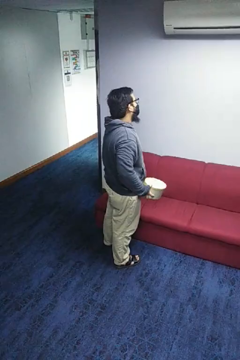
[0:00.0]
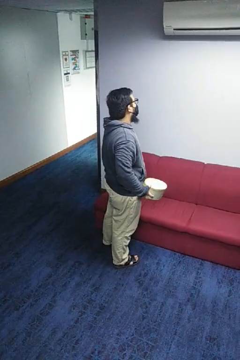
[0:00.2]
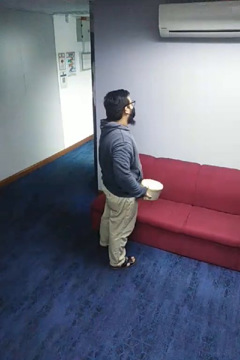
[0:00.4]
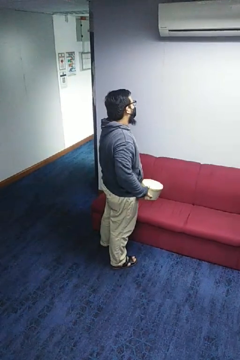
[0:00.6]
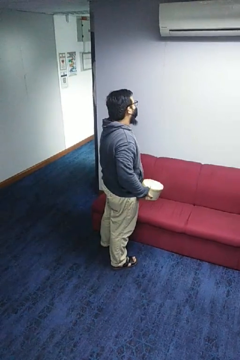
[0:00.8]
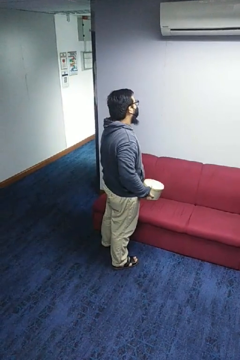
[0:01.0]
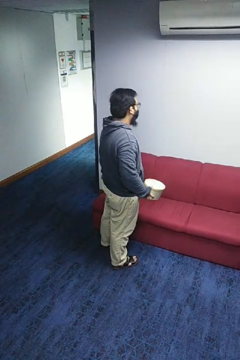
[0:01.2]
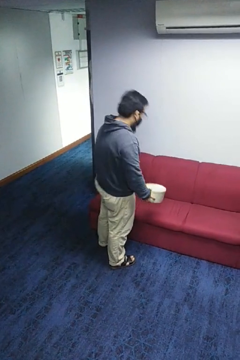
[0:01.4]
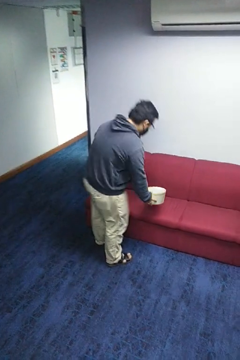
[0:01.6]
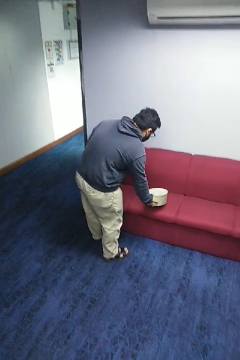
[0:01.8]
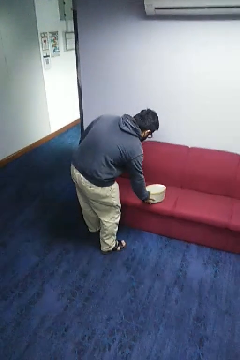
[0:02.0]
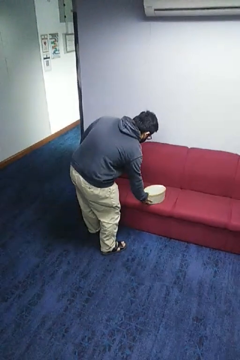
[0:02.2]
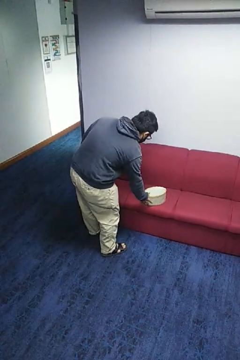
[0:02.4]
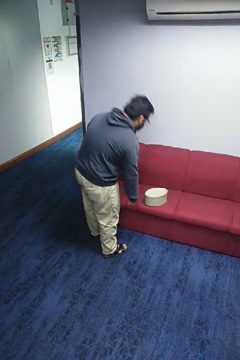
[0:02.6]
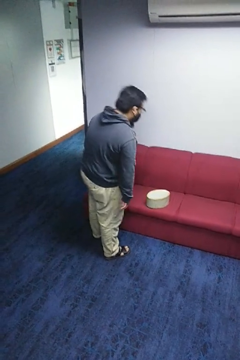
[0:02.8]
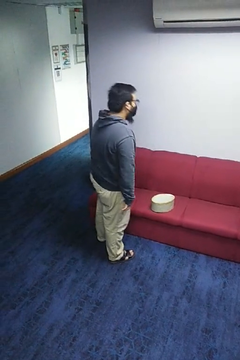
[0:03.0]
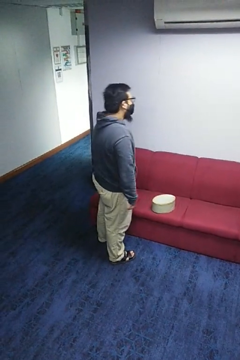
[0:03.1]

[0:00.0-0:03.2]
person puts down object on couch

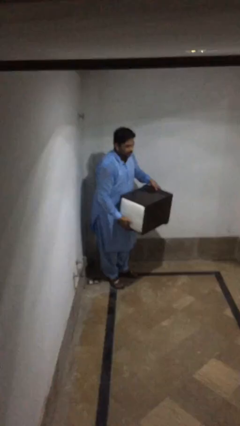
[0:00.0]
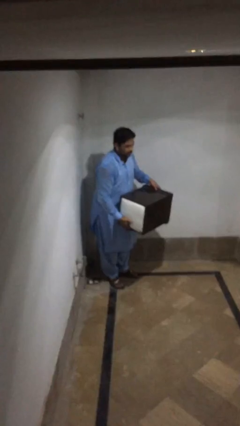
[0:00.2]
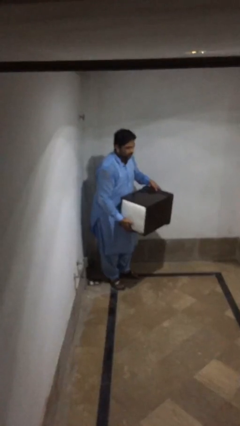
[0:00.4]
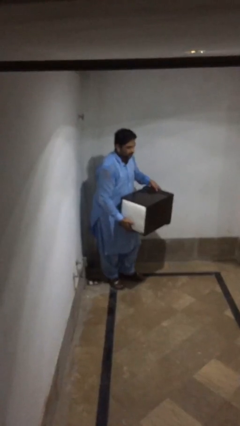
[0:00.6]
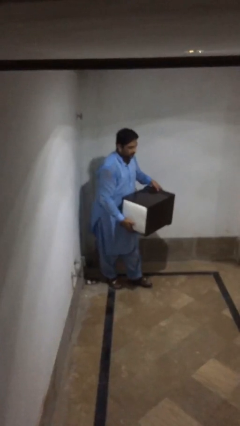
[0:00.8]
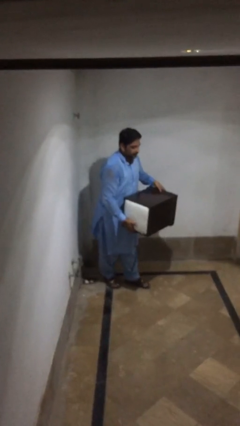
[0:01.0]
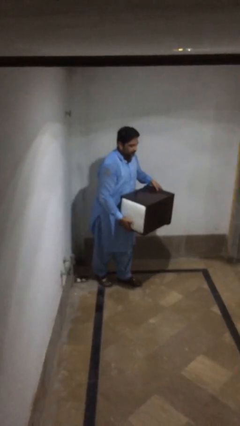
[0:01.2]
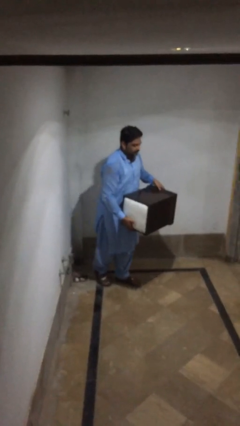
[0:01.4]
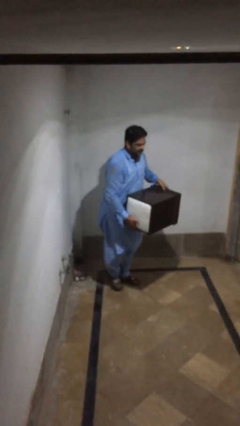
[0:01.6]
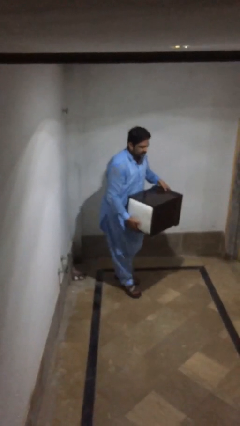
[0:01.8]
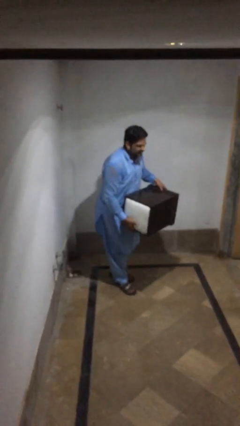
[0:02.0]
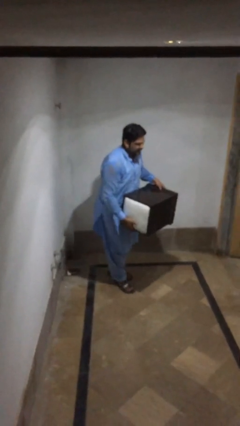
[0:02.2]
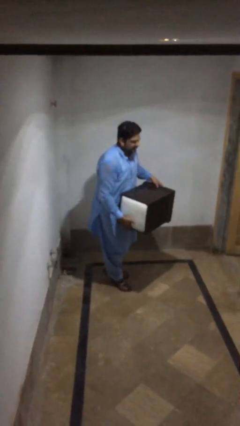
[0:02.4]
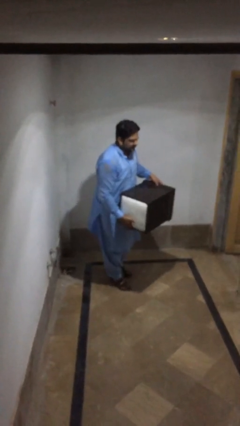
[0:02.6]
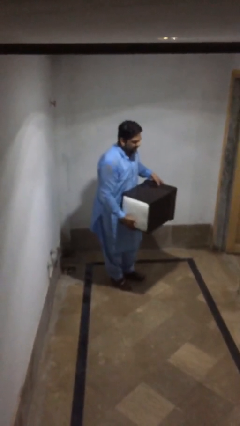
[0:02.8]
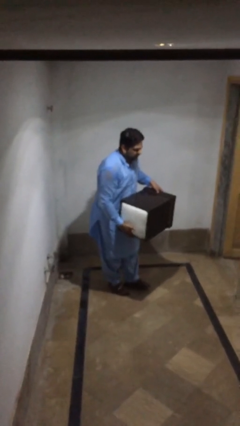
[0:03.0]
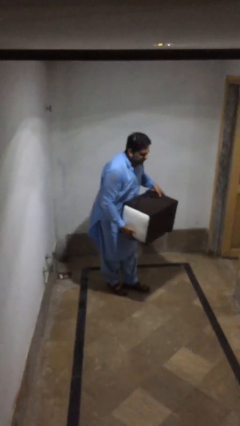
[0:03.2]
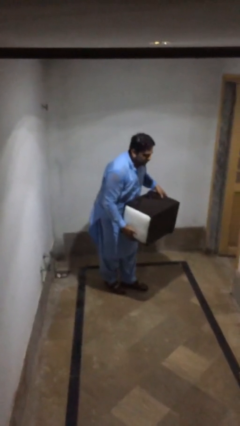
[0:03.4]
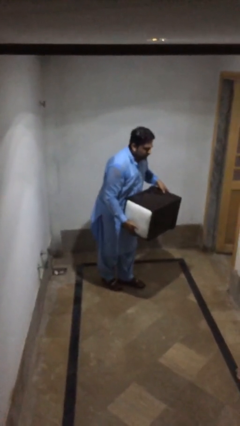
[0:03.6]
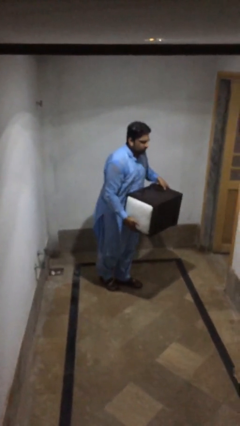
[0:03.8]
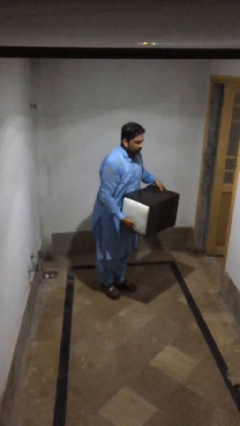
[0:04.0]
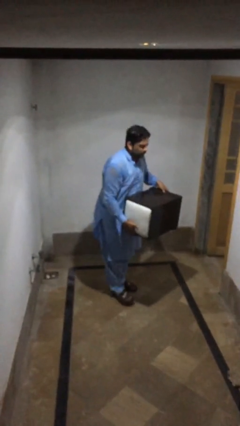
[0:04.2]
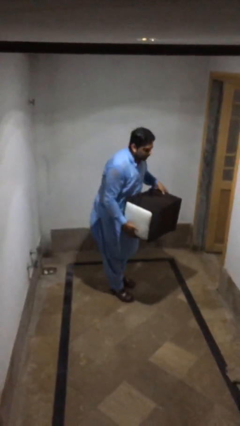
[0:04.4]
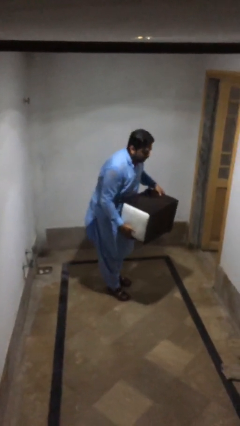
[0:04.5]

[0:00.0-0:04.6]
person carries heavy object

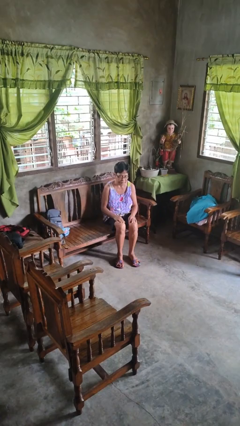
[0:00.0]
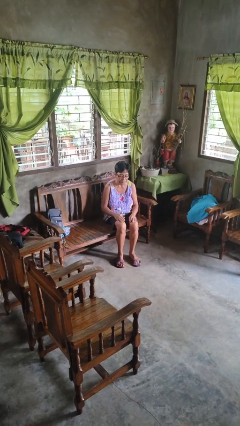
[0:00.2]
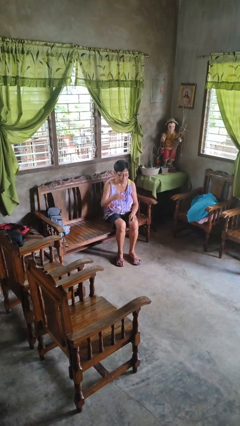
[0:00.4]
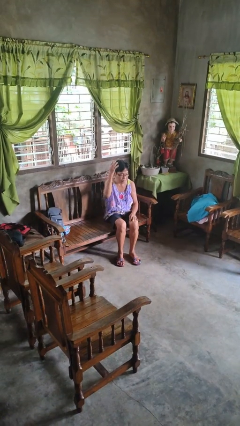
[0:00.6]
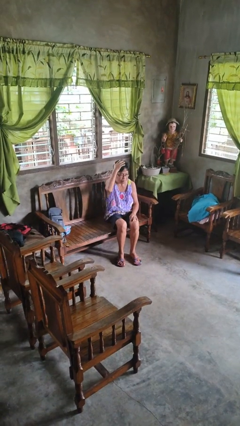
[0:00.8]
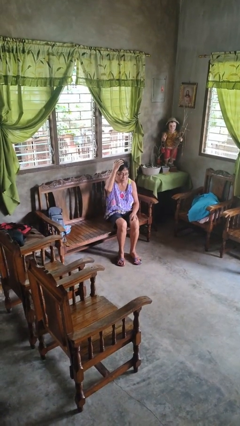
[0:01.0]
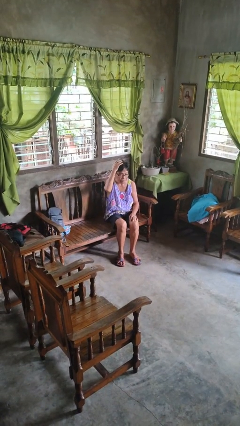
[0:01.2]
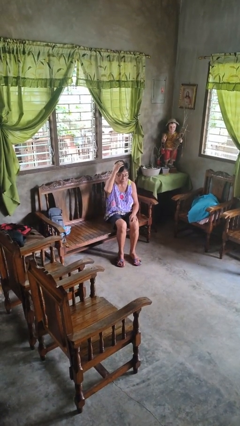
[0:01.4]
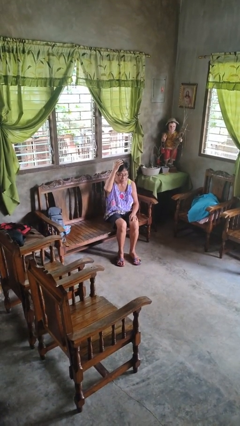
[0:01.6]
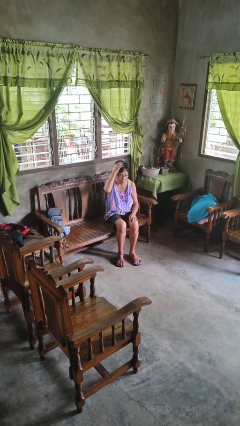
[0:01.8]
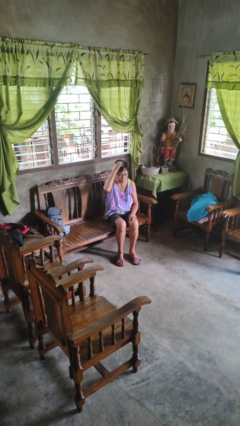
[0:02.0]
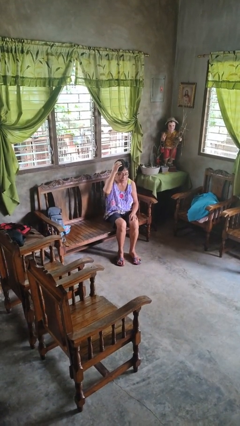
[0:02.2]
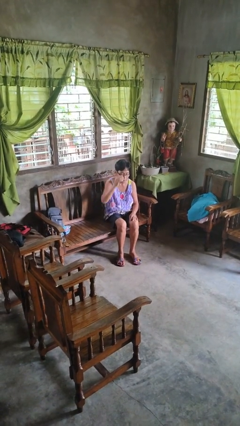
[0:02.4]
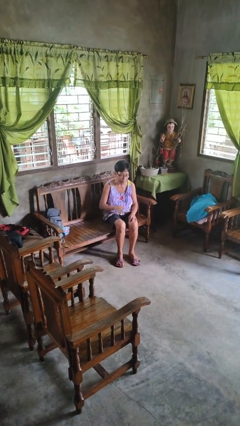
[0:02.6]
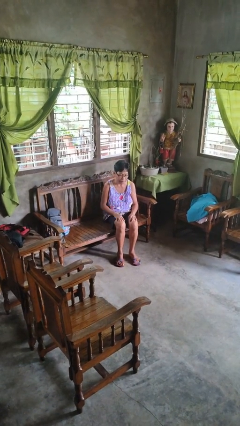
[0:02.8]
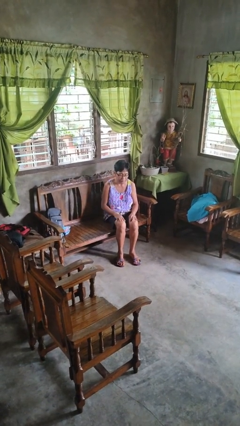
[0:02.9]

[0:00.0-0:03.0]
person pats head

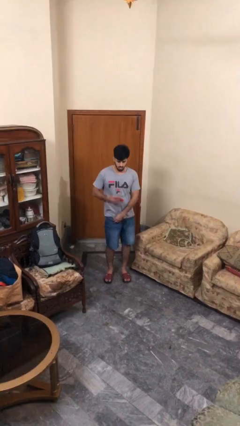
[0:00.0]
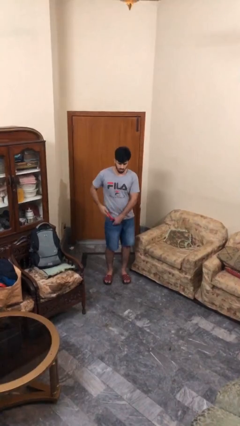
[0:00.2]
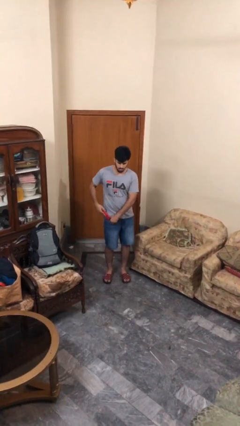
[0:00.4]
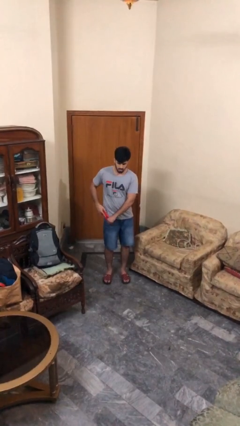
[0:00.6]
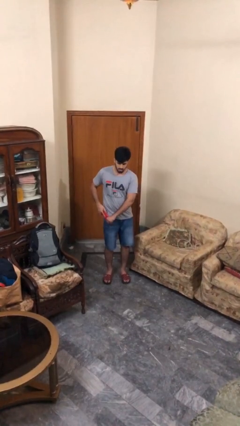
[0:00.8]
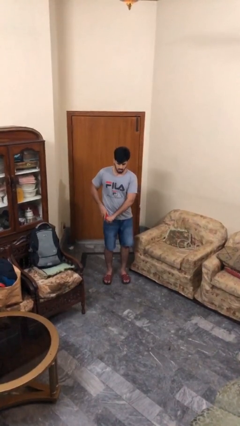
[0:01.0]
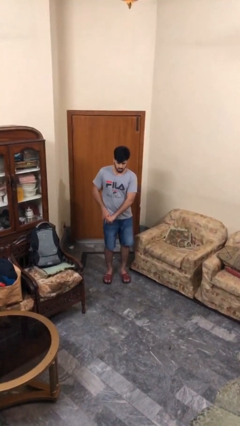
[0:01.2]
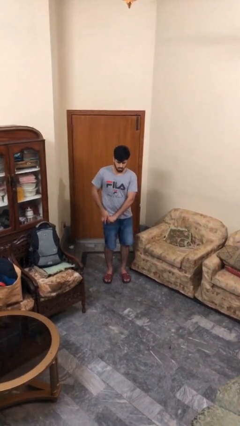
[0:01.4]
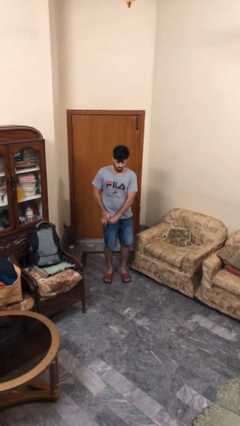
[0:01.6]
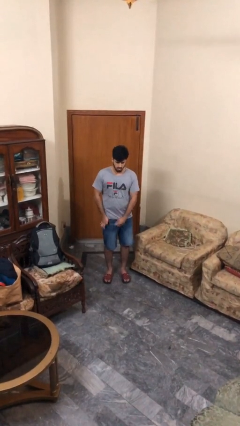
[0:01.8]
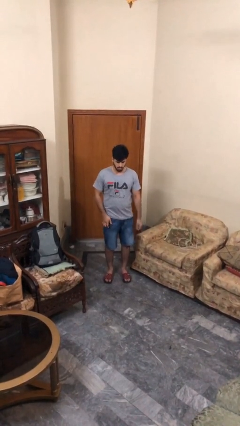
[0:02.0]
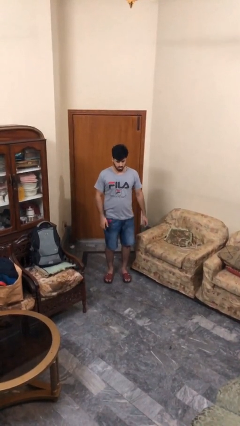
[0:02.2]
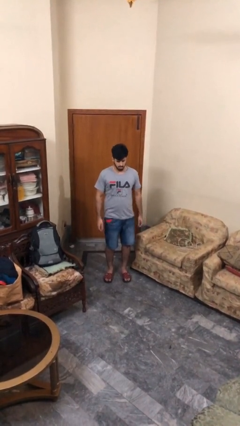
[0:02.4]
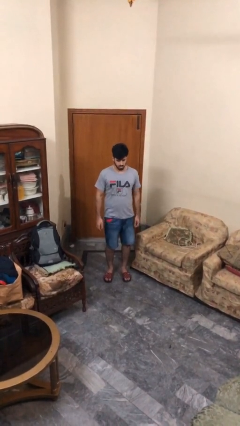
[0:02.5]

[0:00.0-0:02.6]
person puts phone into pocket

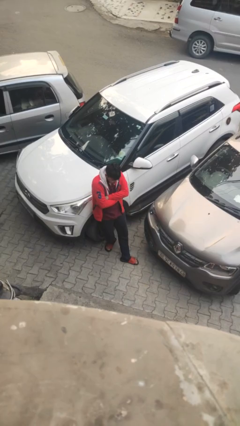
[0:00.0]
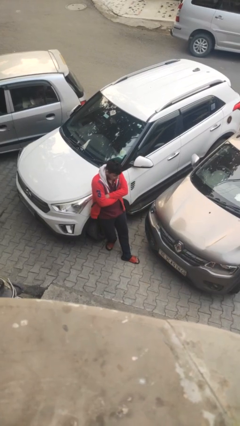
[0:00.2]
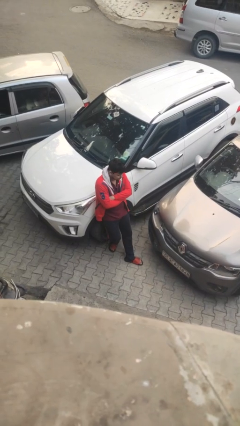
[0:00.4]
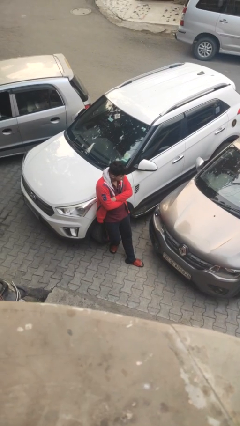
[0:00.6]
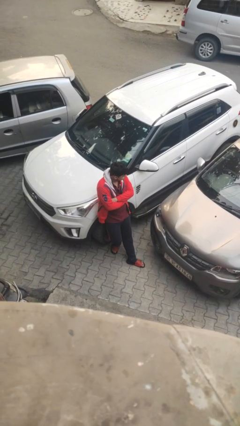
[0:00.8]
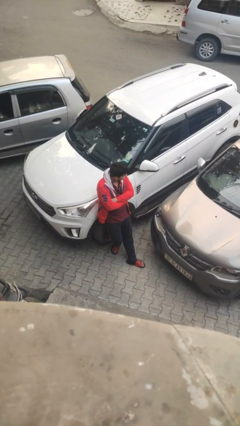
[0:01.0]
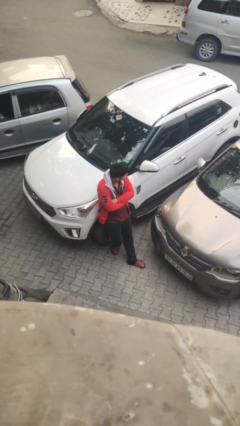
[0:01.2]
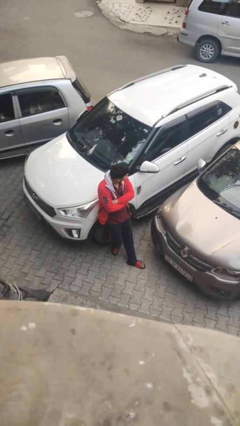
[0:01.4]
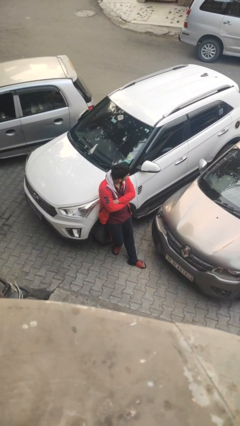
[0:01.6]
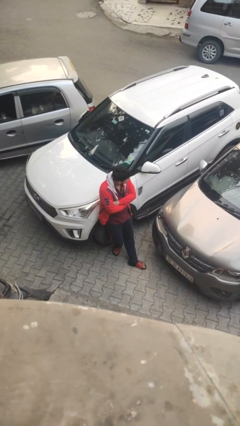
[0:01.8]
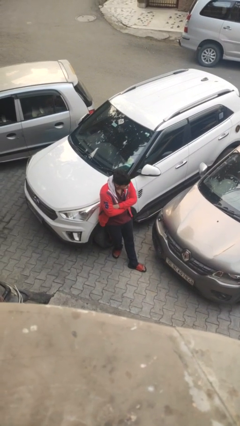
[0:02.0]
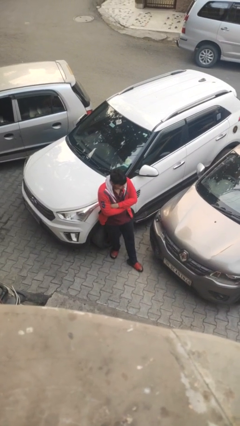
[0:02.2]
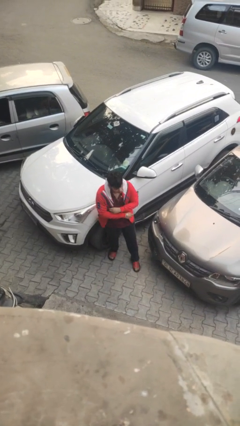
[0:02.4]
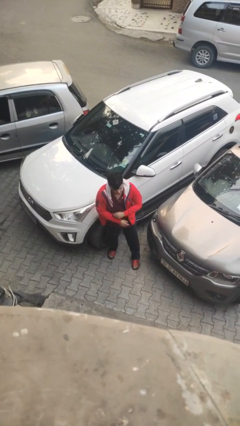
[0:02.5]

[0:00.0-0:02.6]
person leans against car

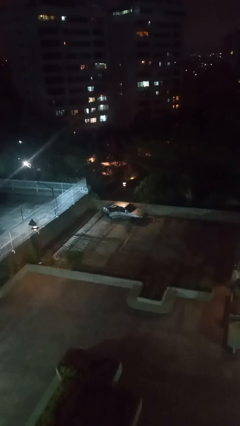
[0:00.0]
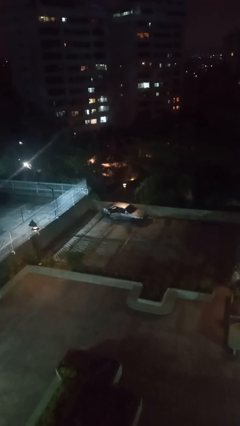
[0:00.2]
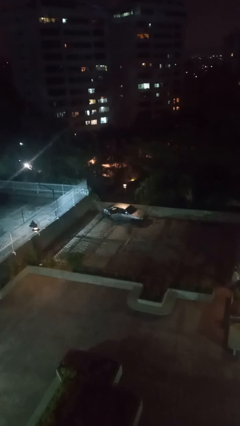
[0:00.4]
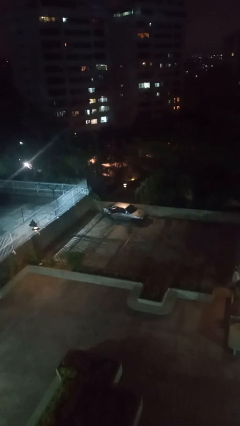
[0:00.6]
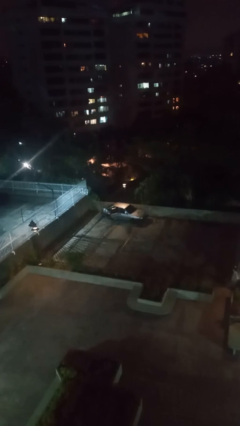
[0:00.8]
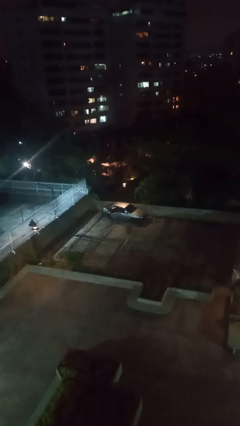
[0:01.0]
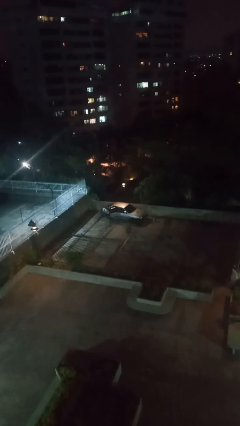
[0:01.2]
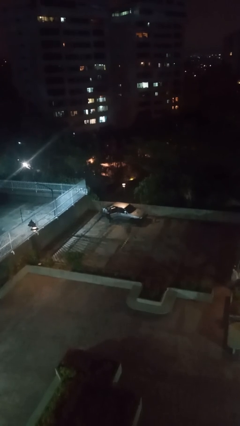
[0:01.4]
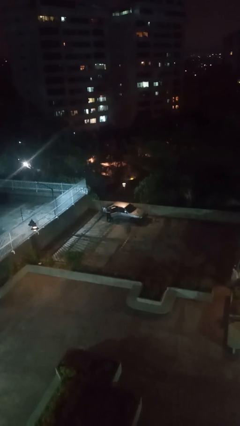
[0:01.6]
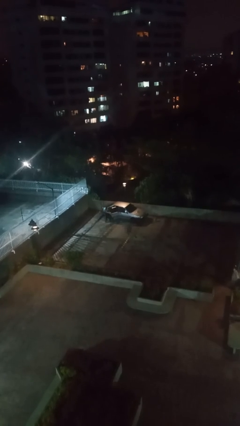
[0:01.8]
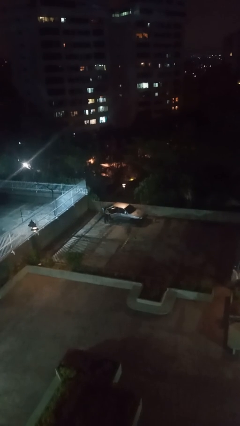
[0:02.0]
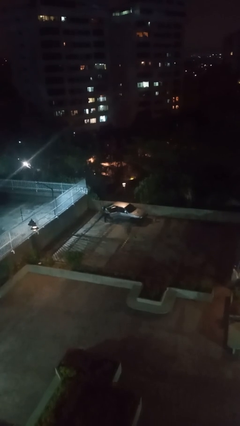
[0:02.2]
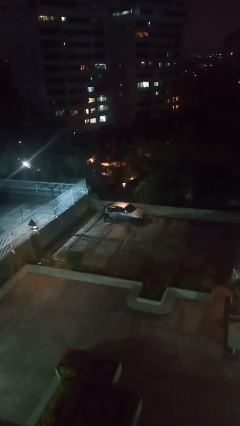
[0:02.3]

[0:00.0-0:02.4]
car drops off person
